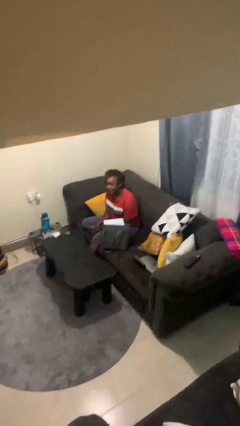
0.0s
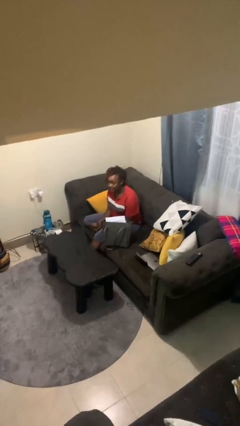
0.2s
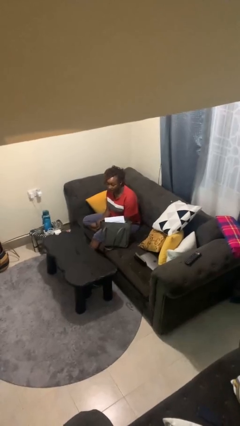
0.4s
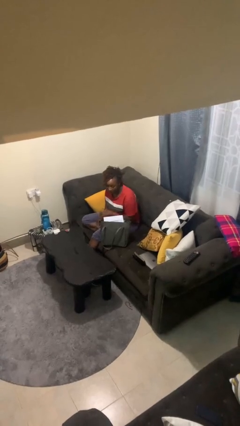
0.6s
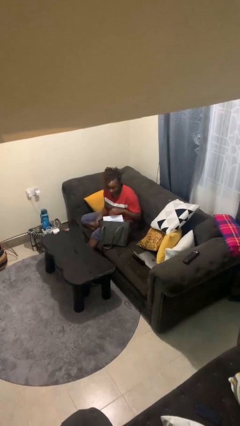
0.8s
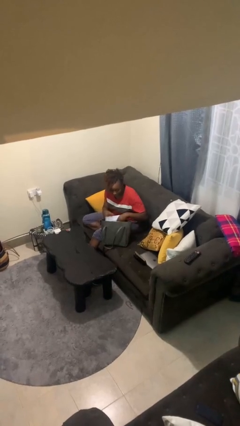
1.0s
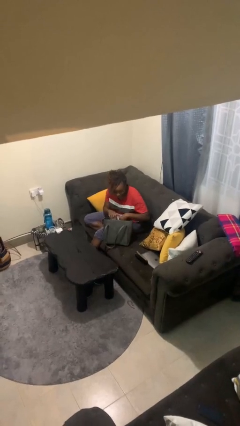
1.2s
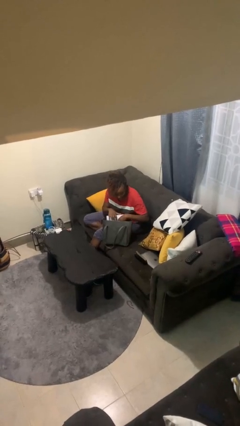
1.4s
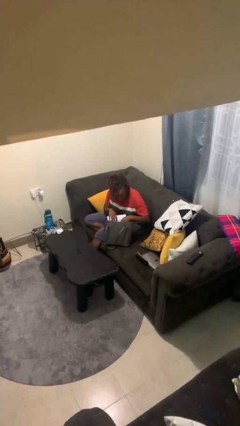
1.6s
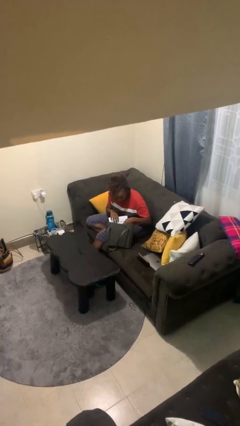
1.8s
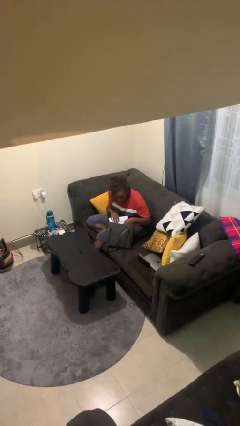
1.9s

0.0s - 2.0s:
person searches in purse

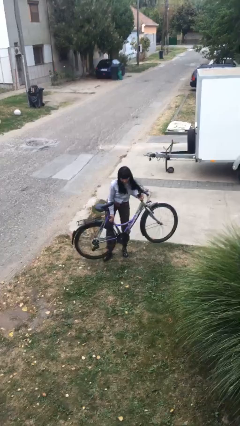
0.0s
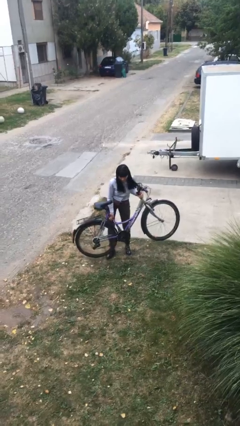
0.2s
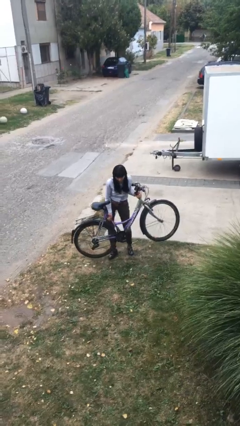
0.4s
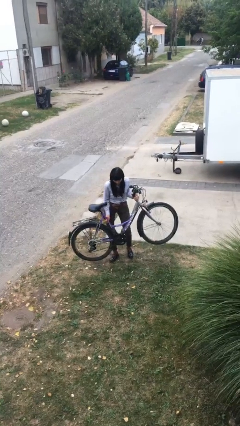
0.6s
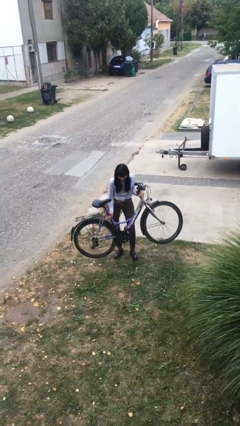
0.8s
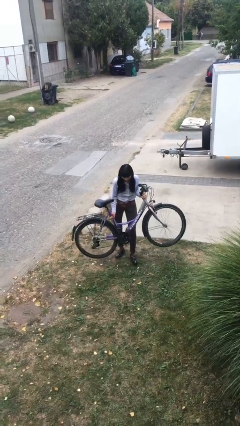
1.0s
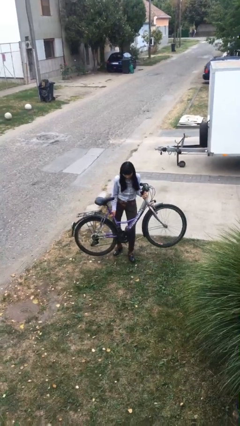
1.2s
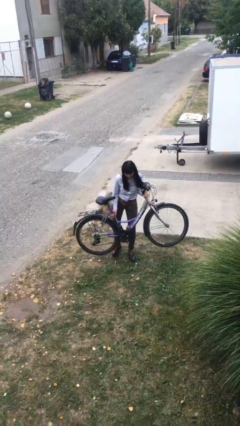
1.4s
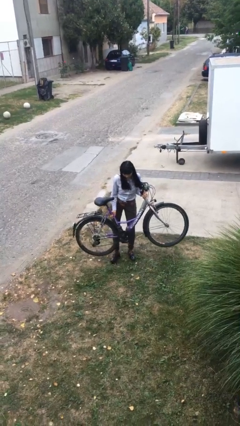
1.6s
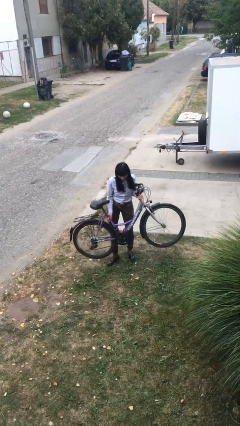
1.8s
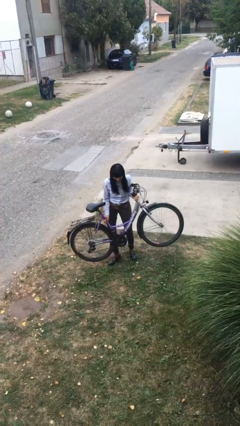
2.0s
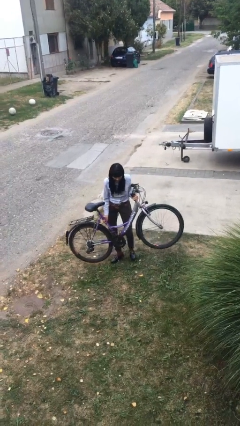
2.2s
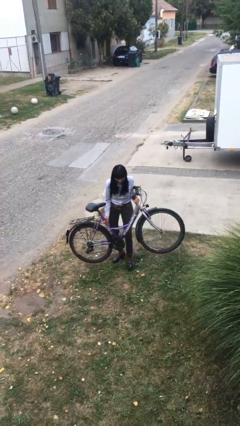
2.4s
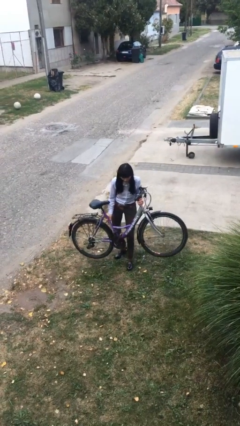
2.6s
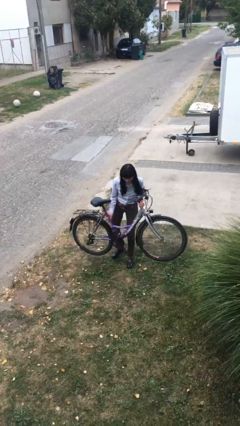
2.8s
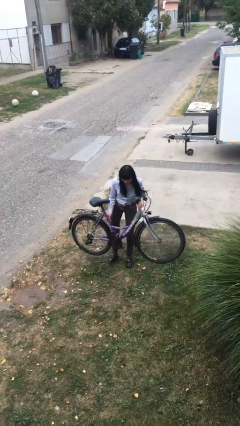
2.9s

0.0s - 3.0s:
person carries heavy object

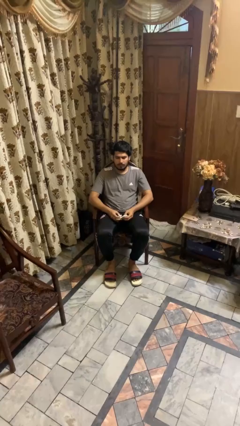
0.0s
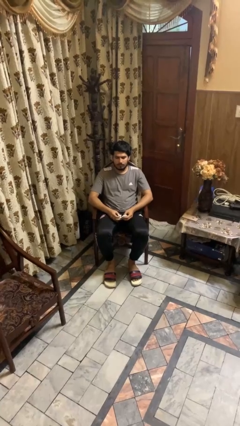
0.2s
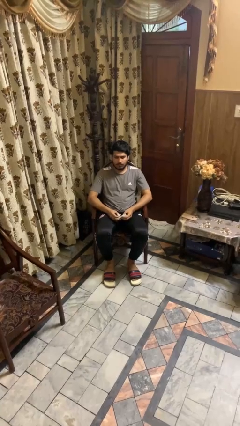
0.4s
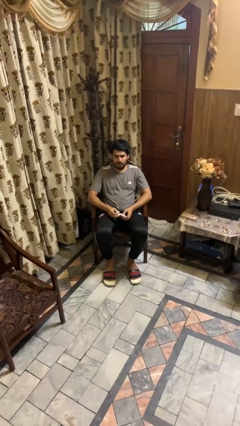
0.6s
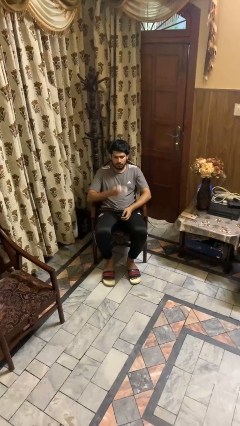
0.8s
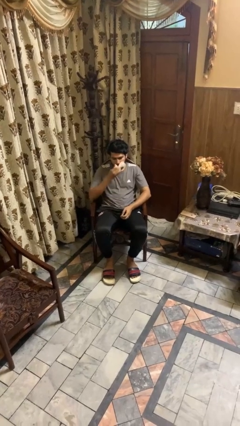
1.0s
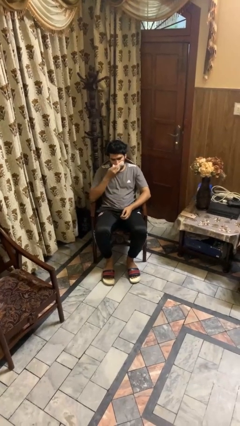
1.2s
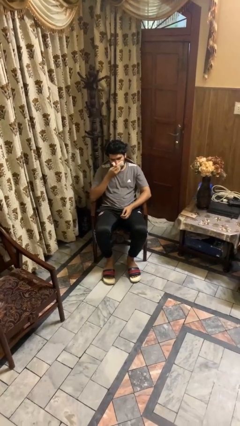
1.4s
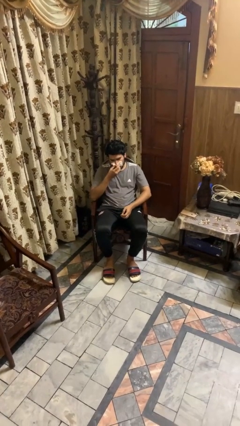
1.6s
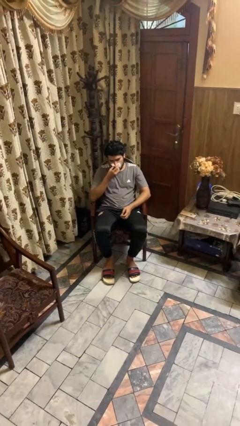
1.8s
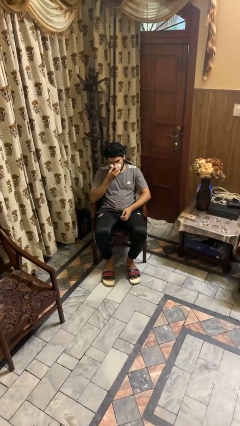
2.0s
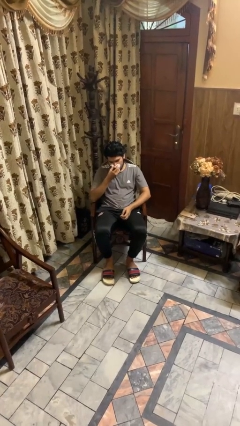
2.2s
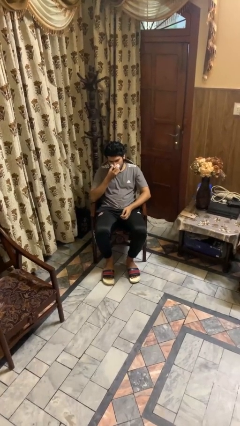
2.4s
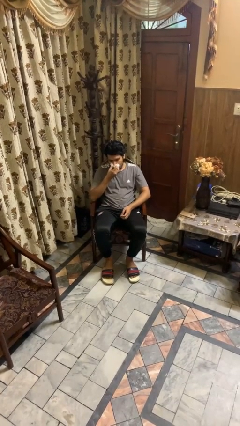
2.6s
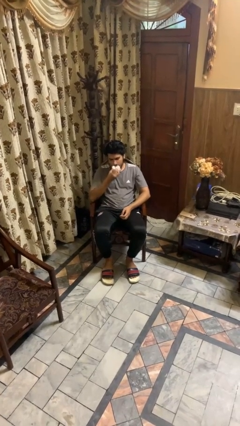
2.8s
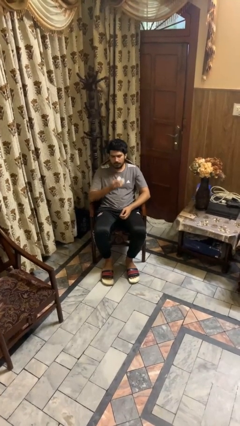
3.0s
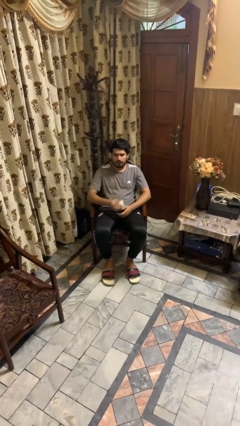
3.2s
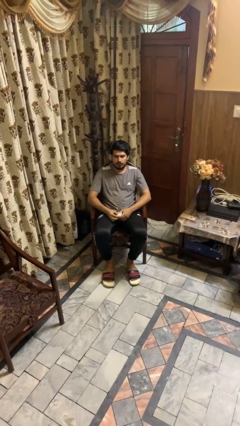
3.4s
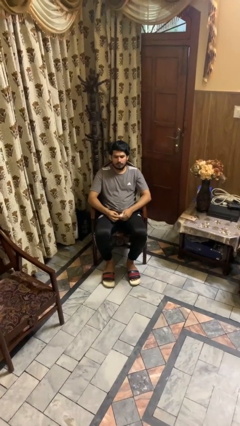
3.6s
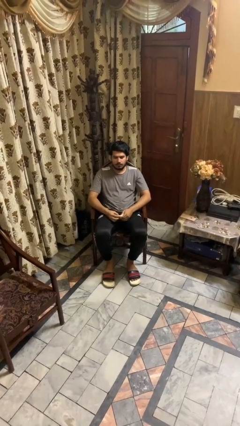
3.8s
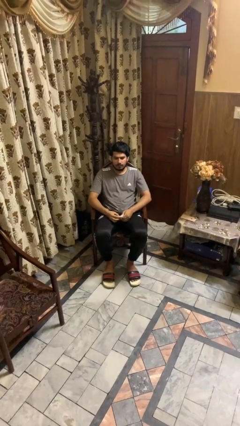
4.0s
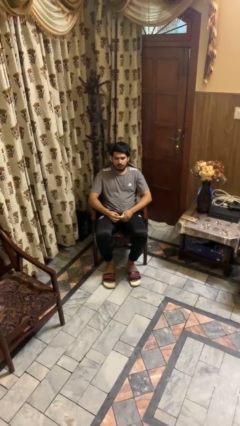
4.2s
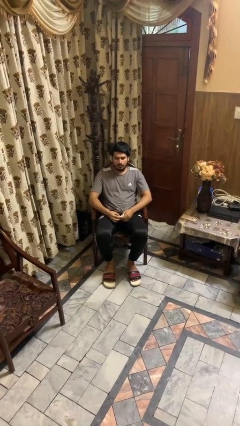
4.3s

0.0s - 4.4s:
person blows nose

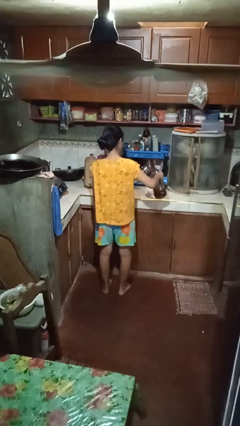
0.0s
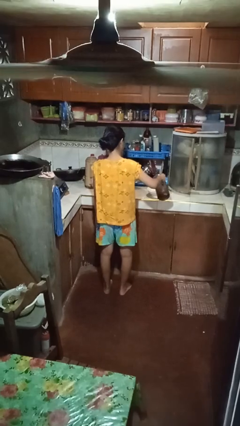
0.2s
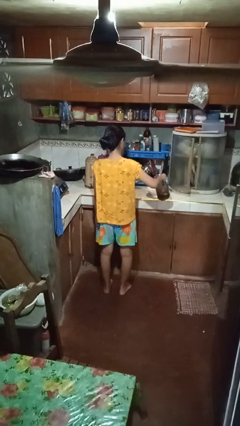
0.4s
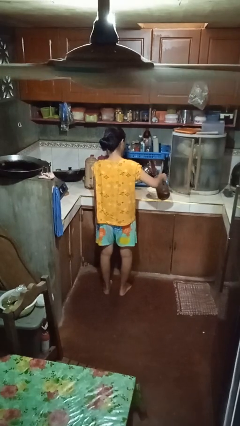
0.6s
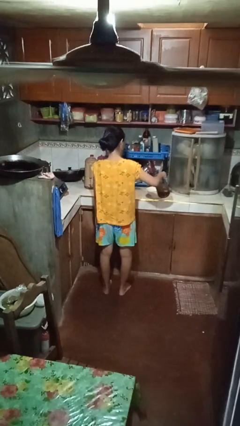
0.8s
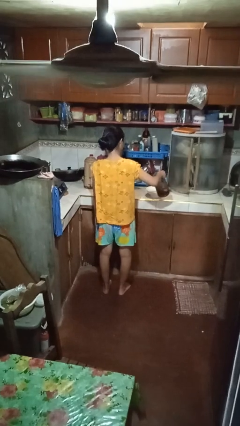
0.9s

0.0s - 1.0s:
person pours into bowl

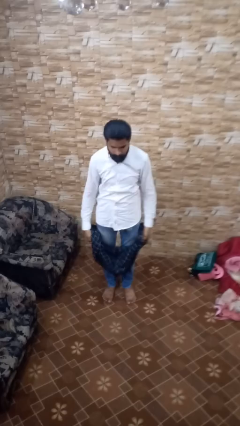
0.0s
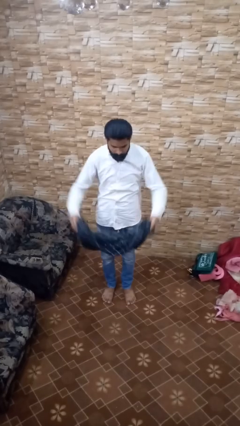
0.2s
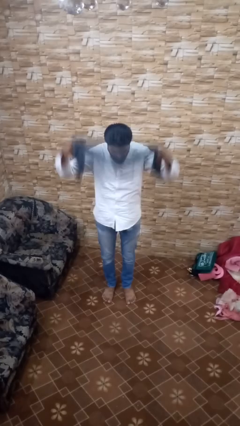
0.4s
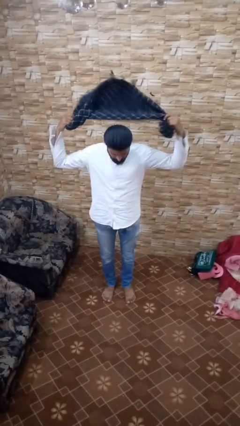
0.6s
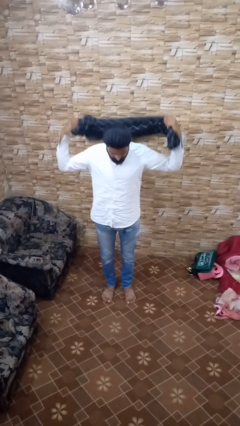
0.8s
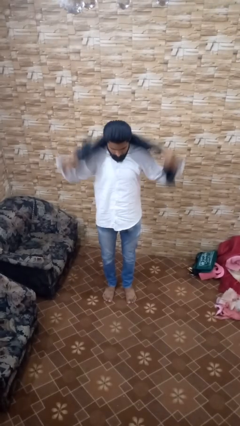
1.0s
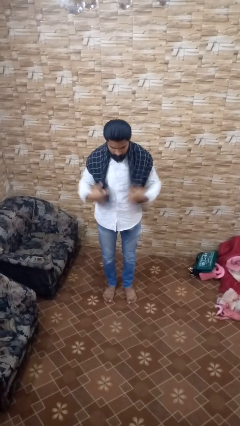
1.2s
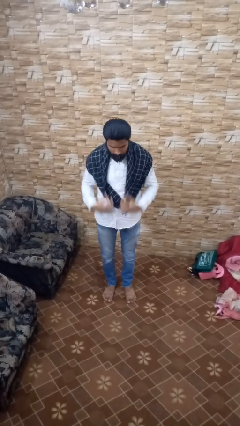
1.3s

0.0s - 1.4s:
person puts on scarf

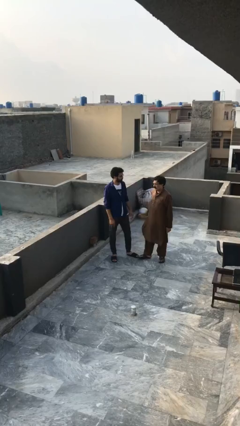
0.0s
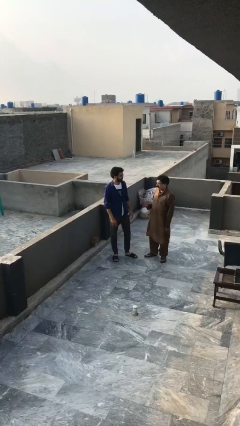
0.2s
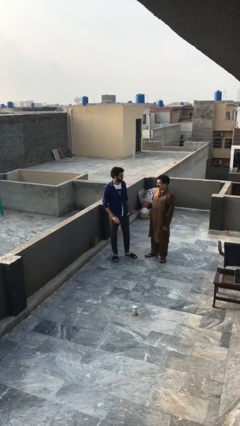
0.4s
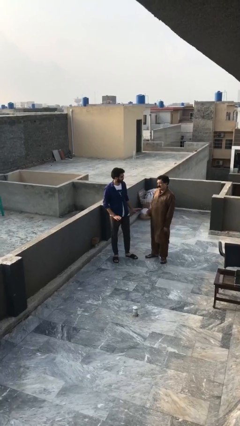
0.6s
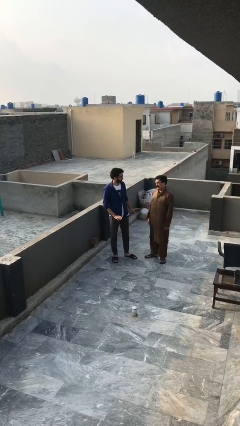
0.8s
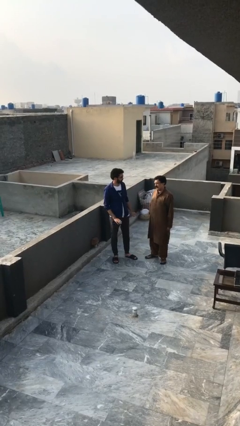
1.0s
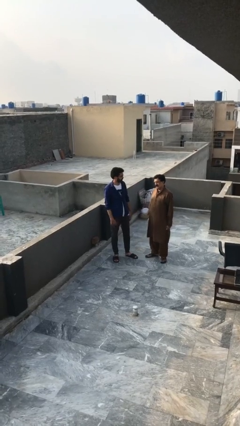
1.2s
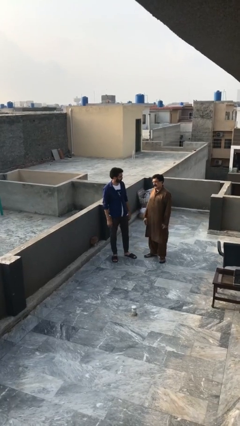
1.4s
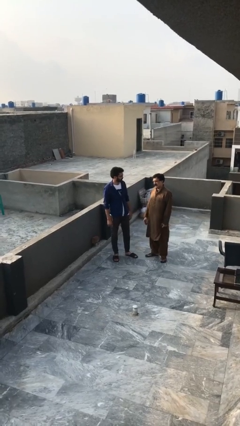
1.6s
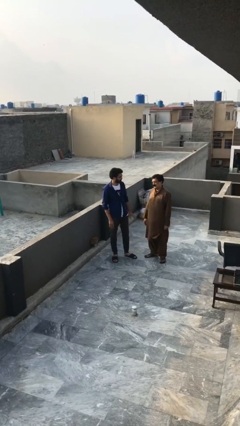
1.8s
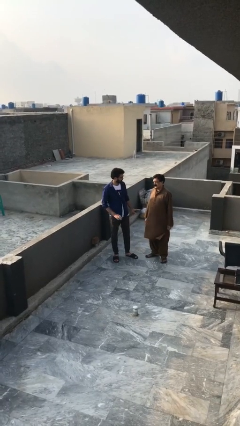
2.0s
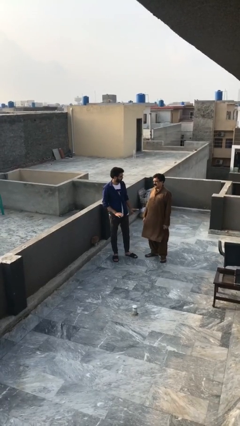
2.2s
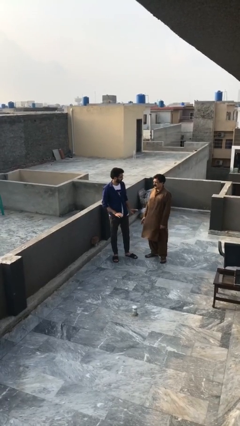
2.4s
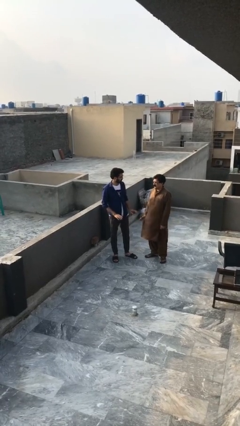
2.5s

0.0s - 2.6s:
person talks to person

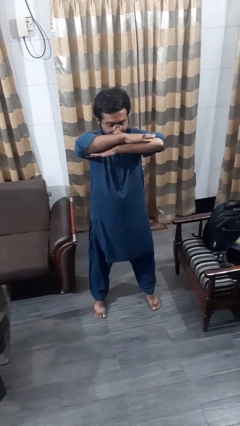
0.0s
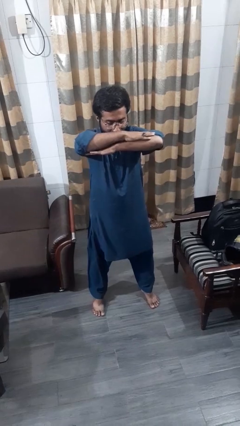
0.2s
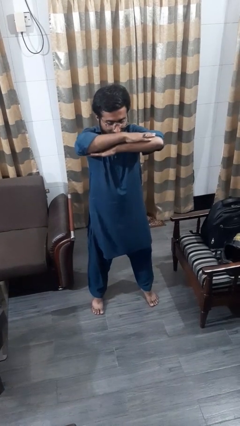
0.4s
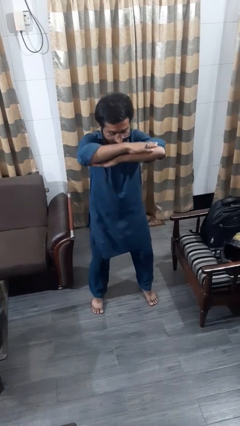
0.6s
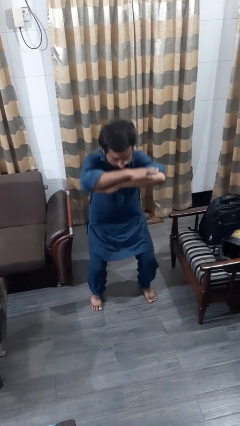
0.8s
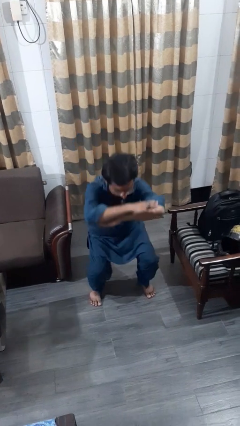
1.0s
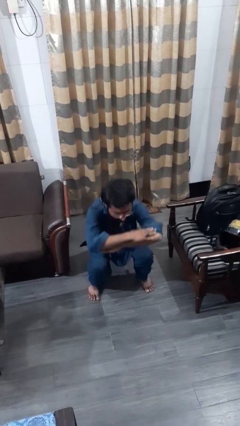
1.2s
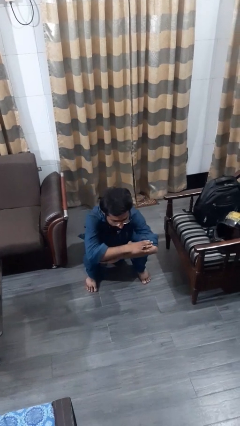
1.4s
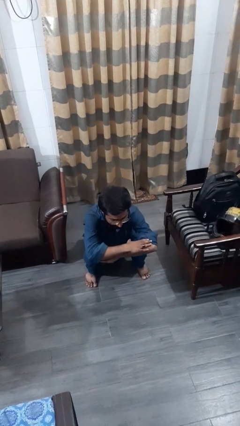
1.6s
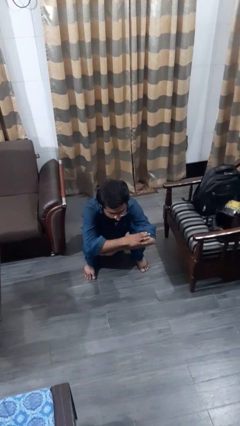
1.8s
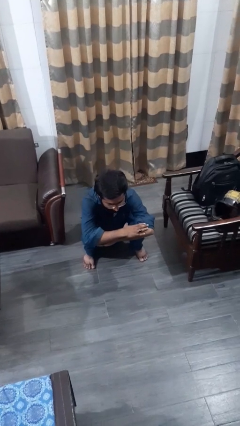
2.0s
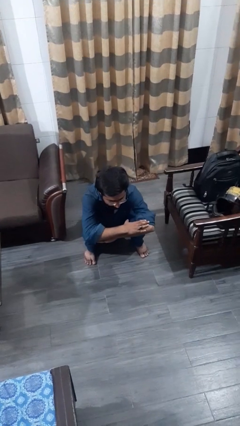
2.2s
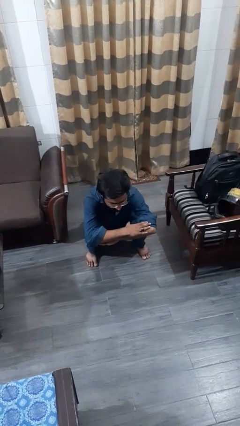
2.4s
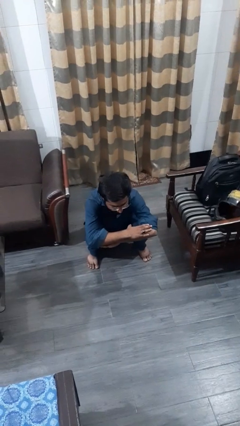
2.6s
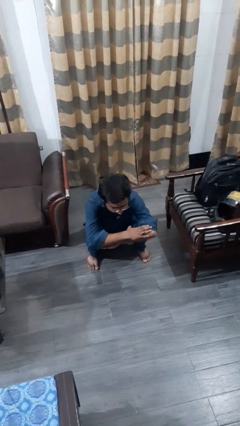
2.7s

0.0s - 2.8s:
person squats

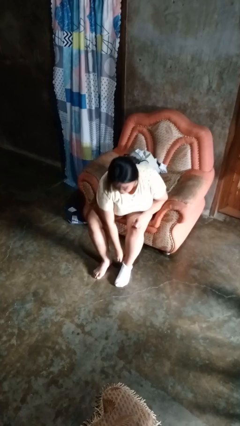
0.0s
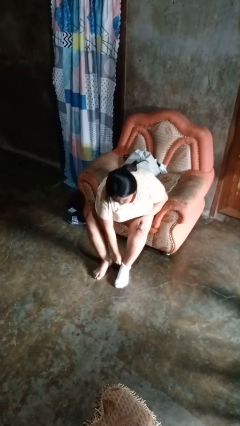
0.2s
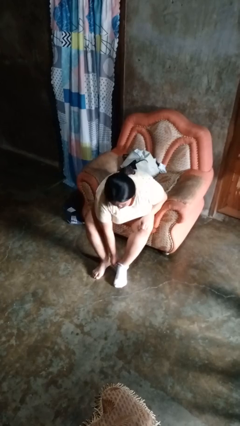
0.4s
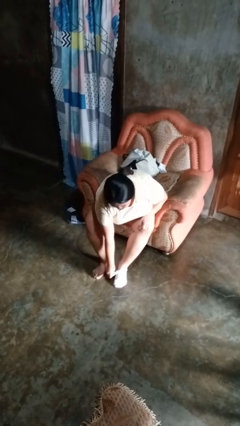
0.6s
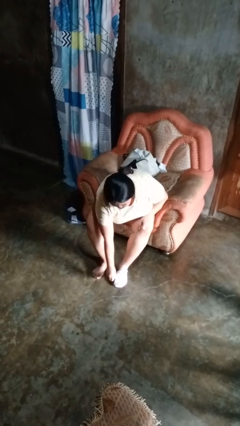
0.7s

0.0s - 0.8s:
person takes off socks
